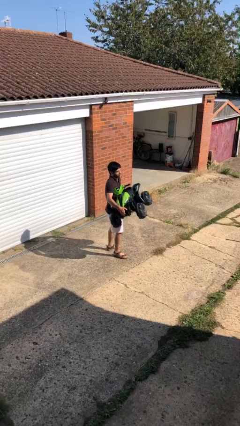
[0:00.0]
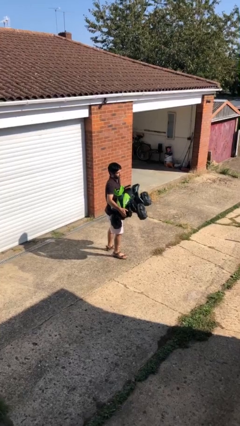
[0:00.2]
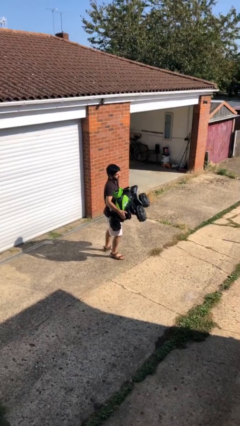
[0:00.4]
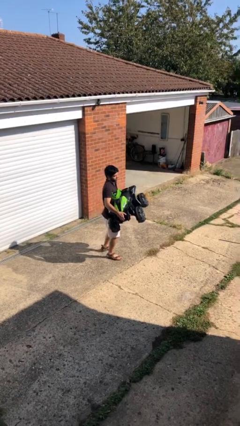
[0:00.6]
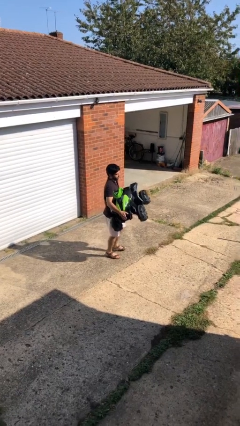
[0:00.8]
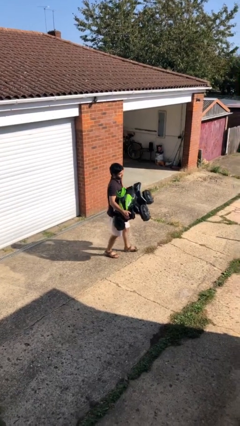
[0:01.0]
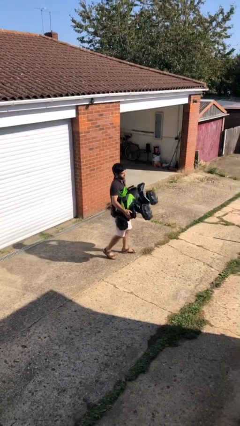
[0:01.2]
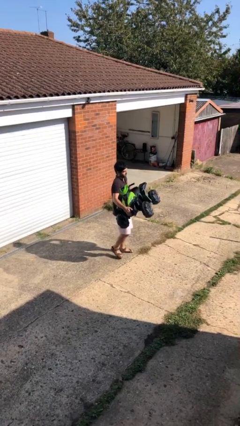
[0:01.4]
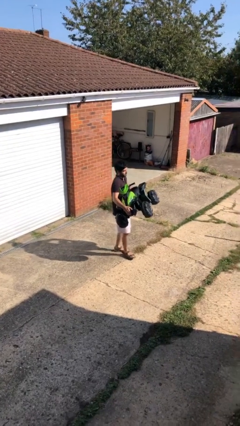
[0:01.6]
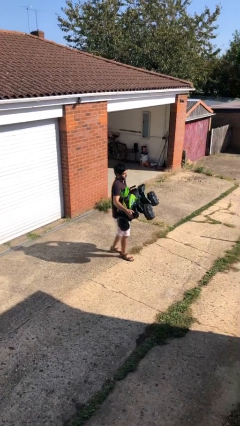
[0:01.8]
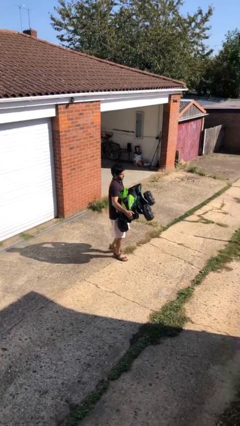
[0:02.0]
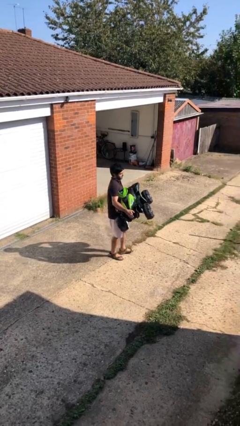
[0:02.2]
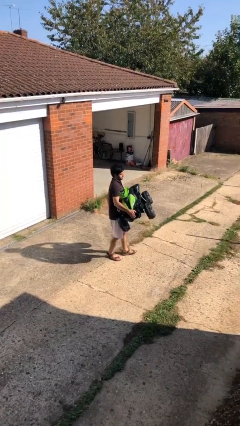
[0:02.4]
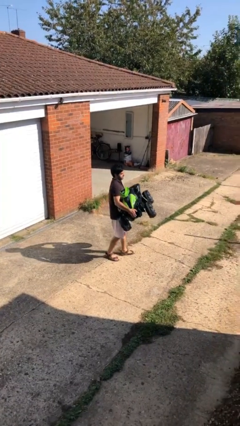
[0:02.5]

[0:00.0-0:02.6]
person carries heavy object

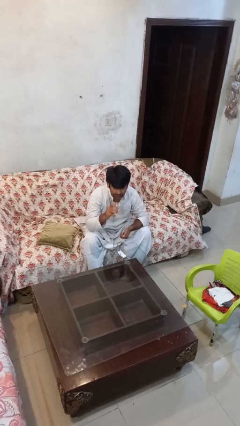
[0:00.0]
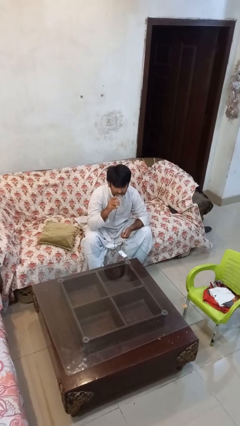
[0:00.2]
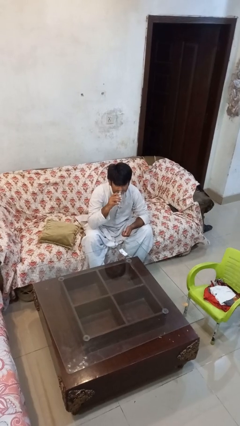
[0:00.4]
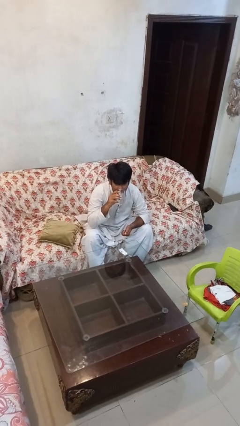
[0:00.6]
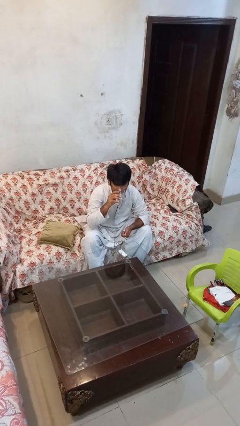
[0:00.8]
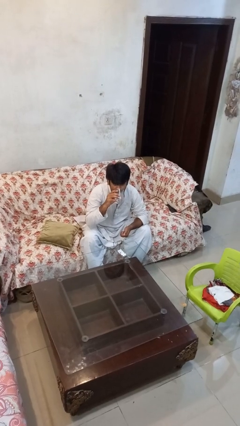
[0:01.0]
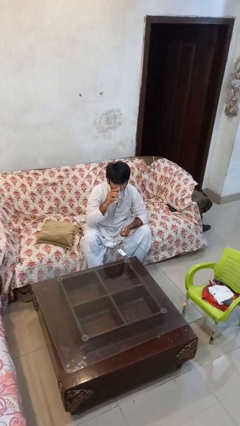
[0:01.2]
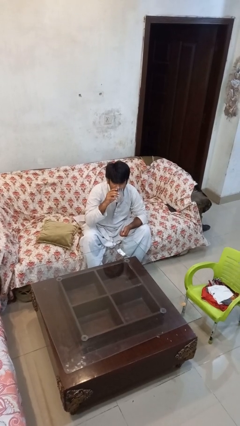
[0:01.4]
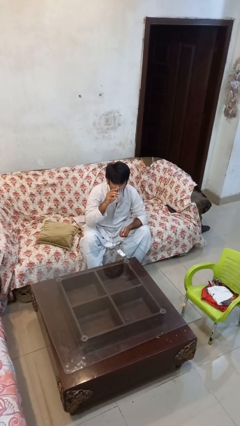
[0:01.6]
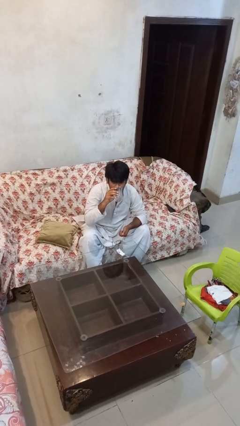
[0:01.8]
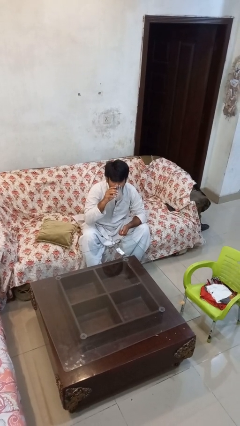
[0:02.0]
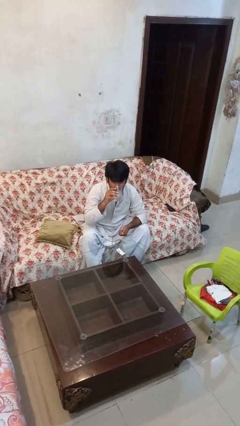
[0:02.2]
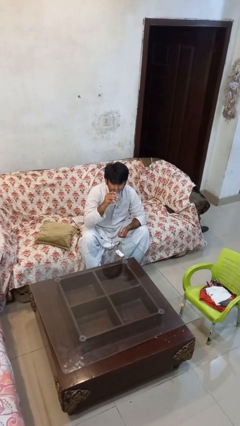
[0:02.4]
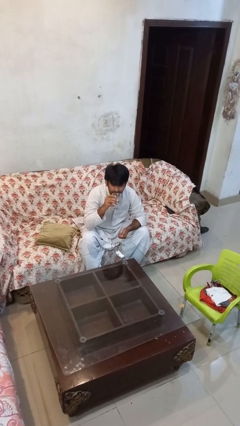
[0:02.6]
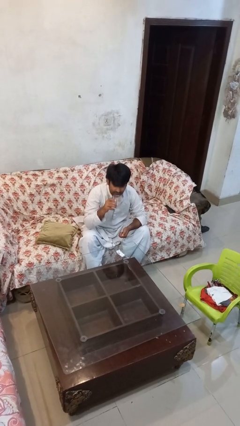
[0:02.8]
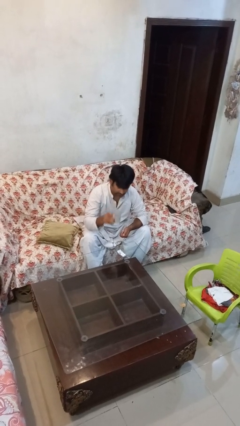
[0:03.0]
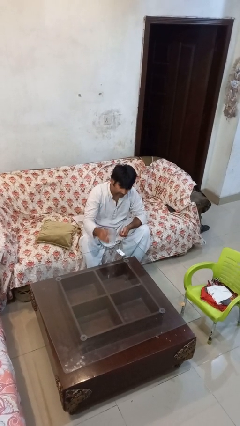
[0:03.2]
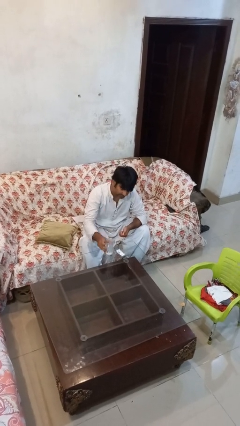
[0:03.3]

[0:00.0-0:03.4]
person drinks from cup

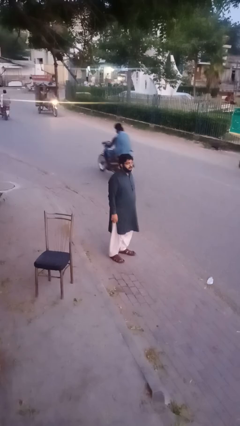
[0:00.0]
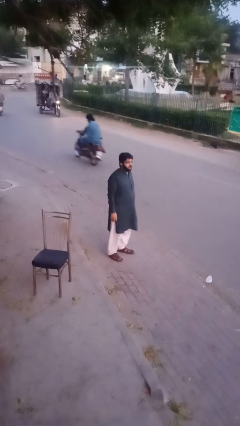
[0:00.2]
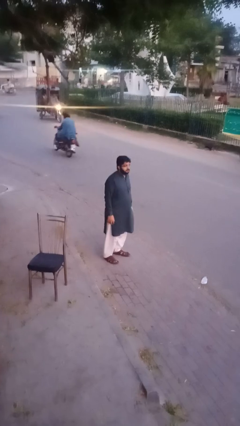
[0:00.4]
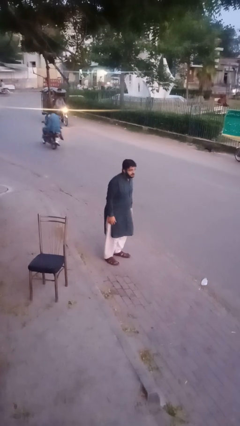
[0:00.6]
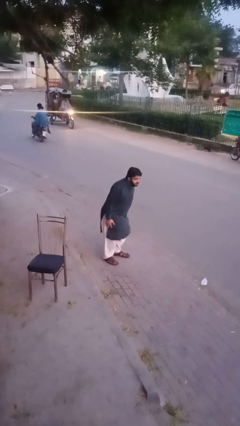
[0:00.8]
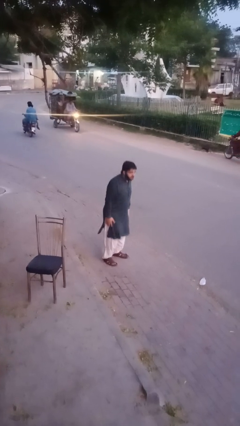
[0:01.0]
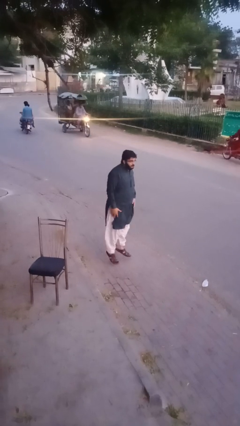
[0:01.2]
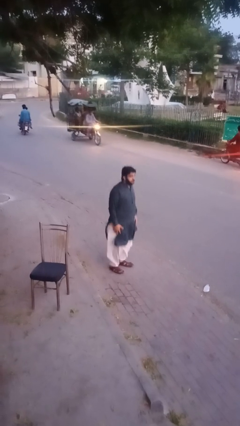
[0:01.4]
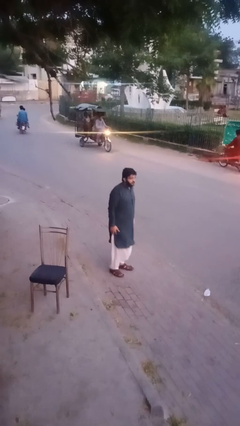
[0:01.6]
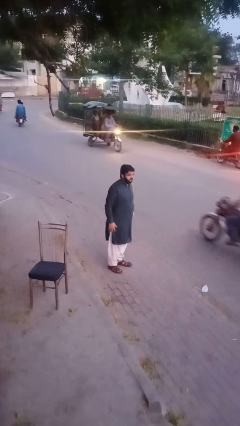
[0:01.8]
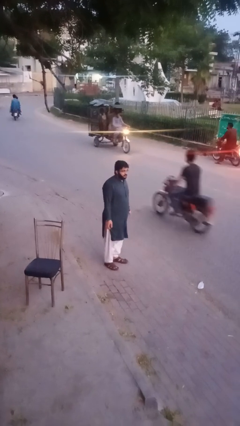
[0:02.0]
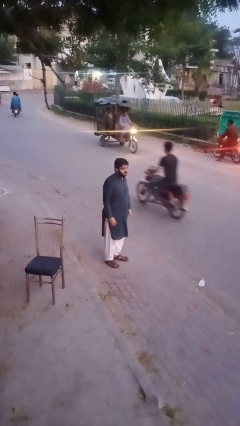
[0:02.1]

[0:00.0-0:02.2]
person jumps

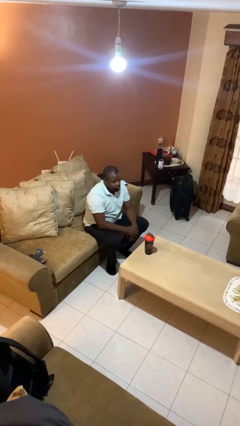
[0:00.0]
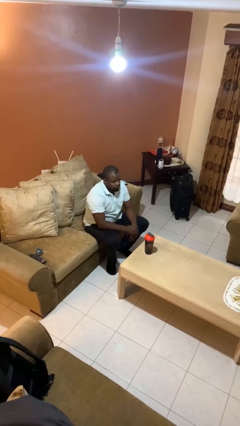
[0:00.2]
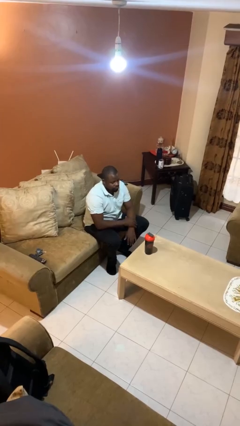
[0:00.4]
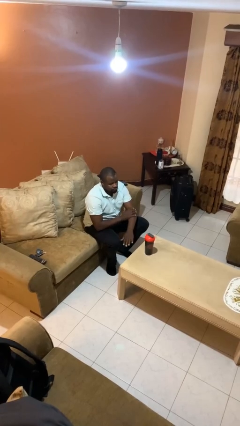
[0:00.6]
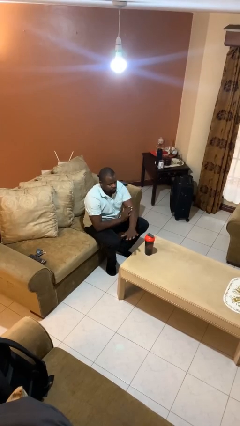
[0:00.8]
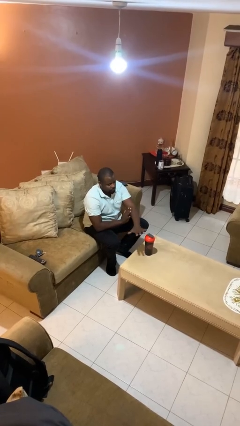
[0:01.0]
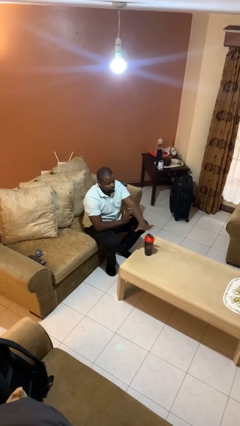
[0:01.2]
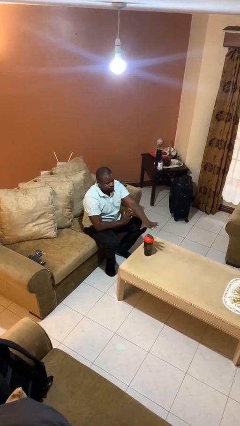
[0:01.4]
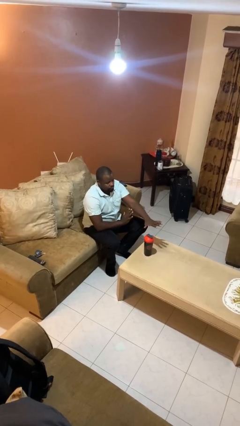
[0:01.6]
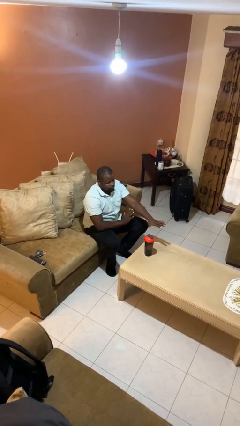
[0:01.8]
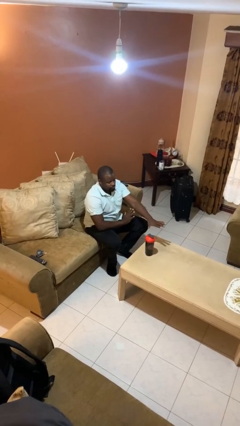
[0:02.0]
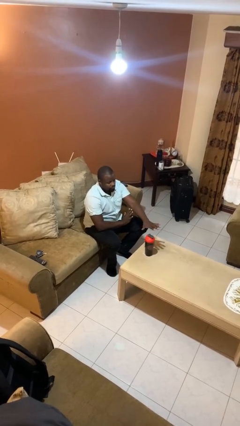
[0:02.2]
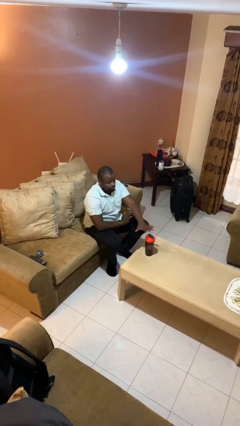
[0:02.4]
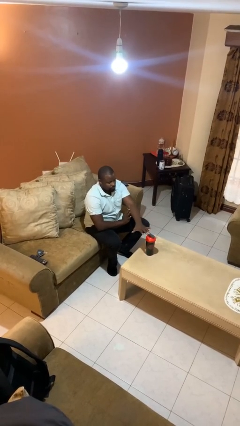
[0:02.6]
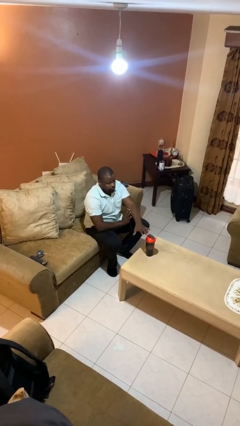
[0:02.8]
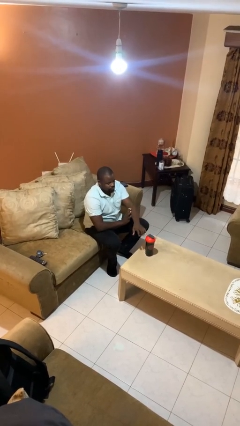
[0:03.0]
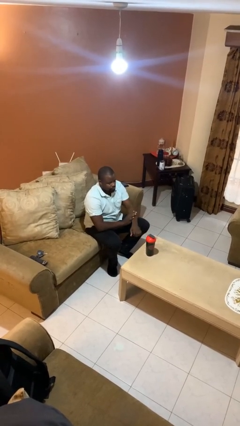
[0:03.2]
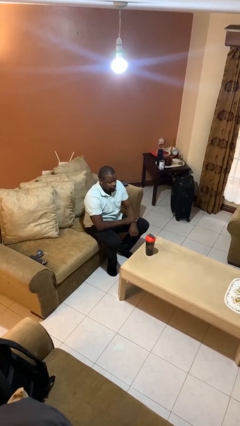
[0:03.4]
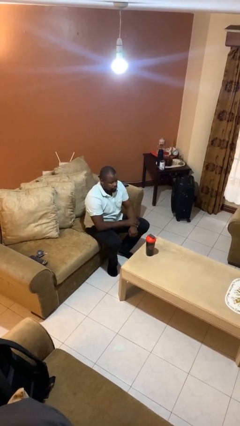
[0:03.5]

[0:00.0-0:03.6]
person waves hand over object

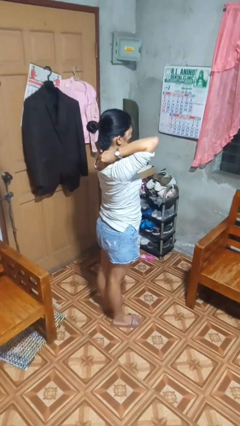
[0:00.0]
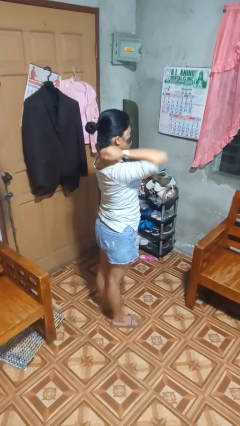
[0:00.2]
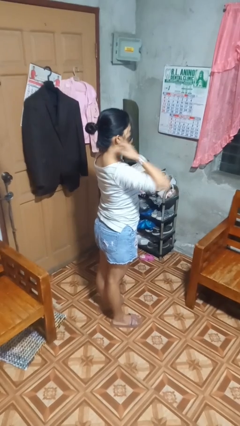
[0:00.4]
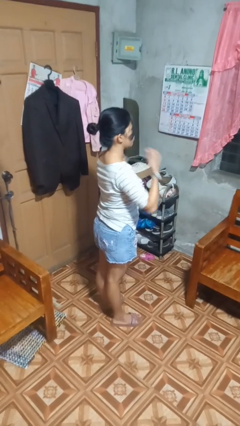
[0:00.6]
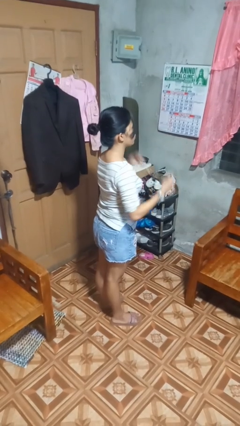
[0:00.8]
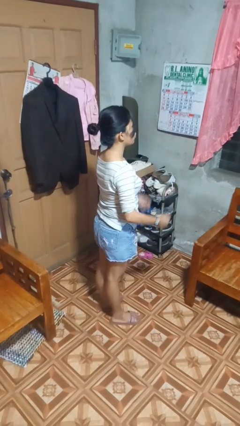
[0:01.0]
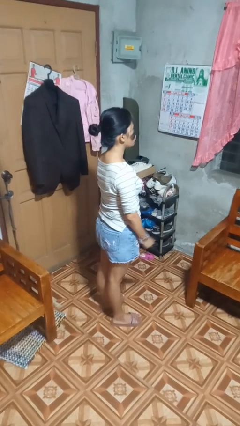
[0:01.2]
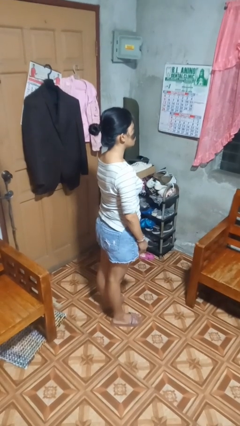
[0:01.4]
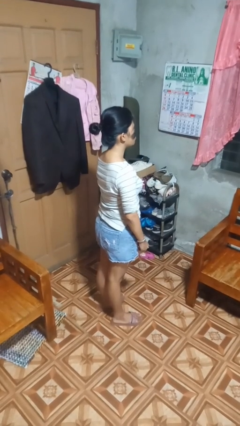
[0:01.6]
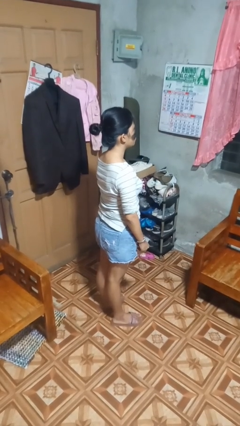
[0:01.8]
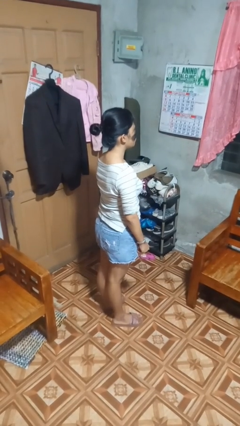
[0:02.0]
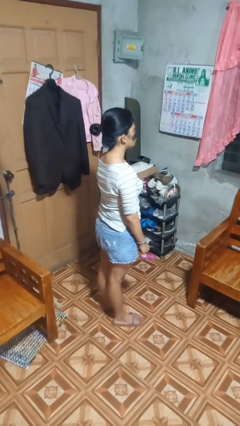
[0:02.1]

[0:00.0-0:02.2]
person takes off necklace

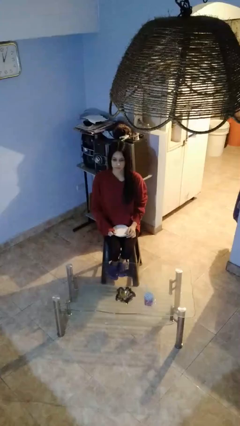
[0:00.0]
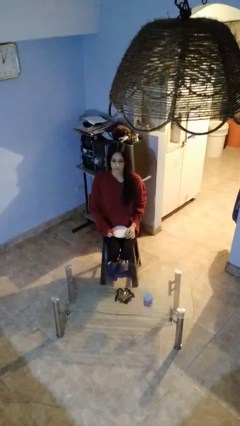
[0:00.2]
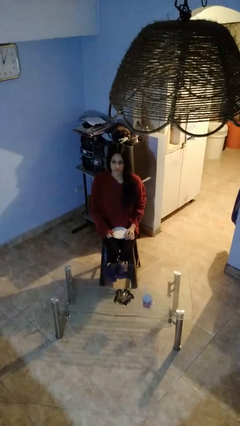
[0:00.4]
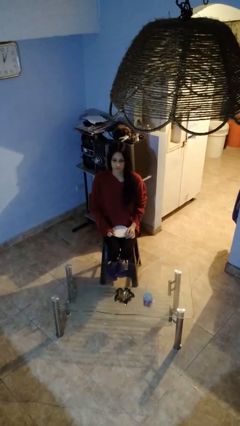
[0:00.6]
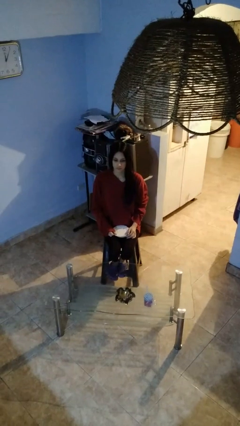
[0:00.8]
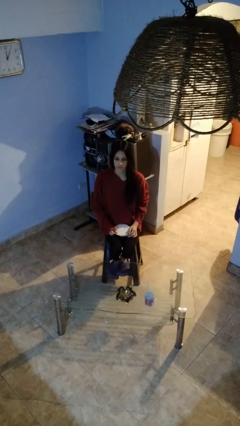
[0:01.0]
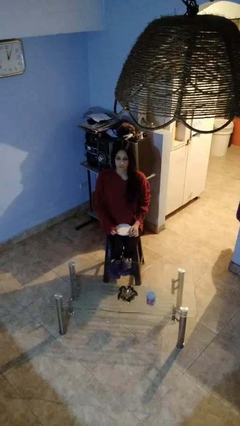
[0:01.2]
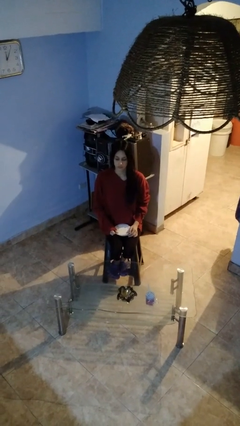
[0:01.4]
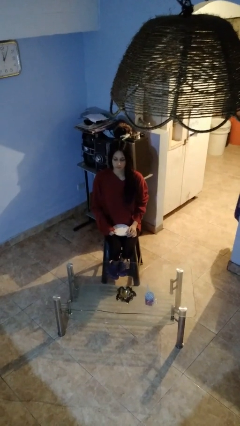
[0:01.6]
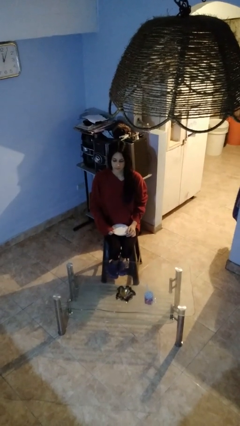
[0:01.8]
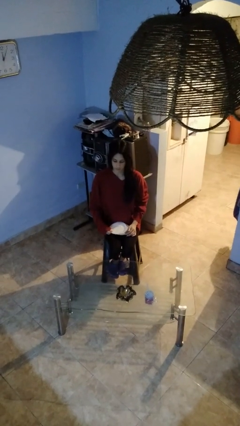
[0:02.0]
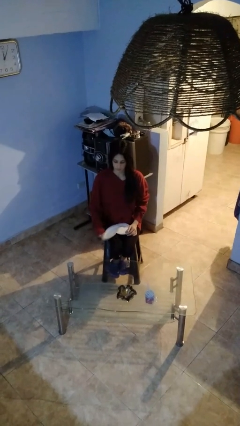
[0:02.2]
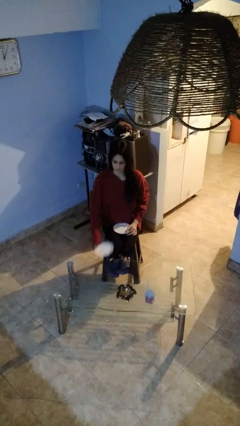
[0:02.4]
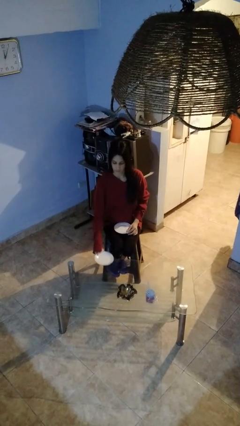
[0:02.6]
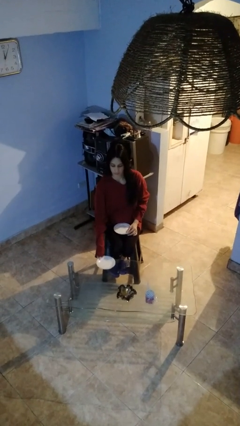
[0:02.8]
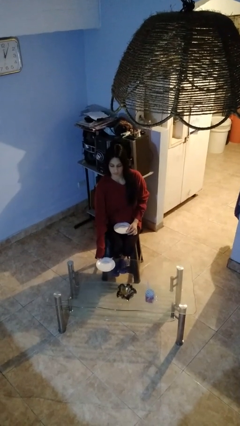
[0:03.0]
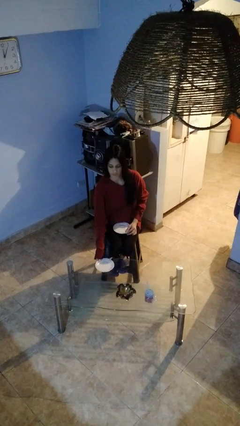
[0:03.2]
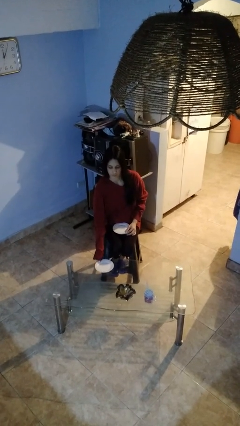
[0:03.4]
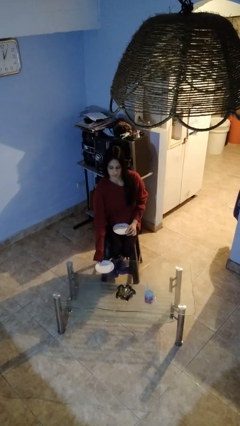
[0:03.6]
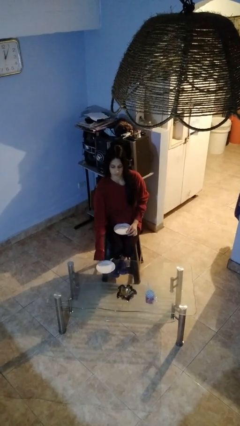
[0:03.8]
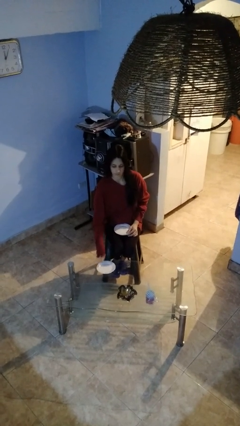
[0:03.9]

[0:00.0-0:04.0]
person sets table
